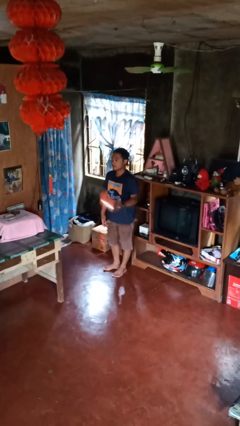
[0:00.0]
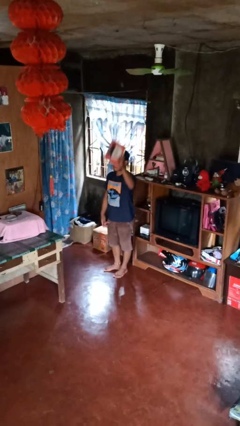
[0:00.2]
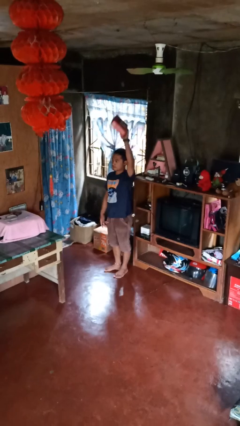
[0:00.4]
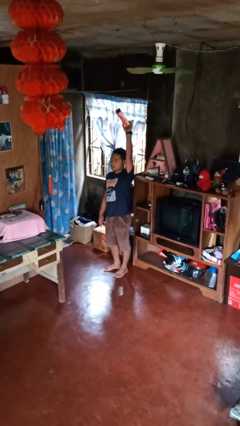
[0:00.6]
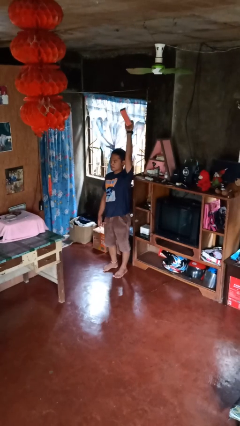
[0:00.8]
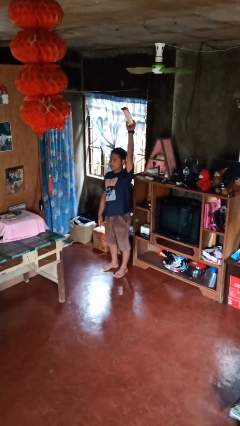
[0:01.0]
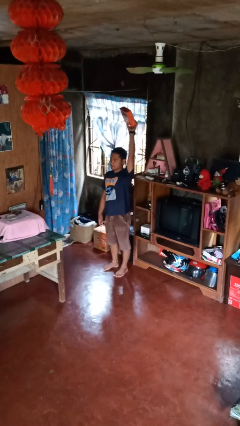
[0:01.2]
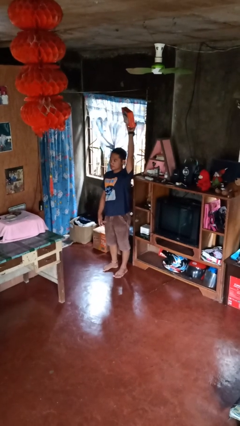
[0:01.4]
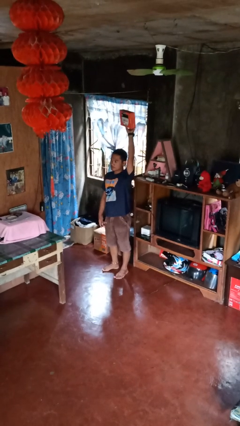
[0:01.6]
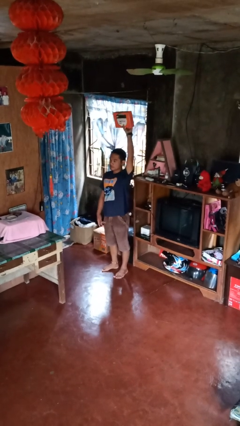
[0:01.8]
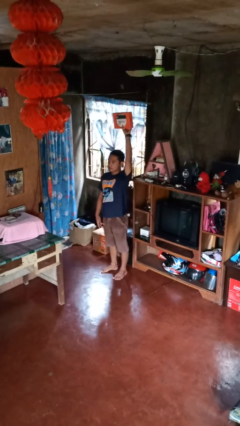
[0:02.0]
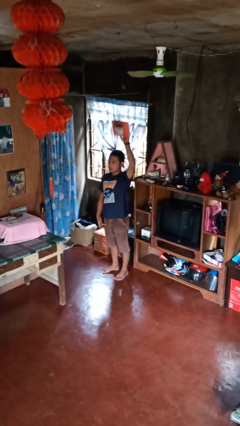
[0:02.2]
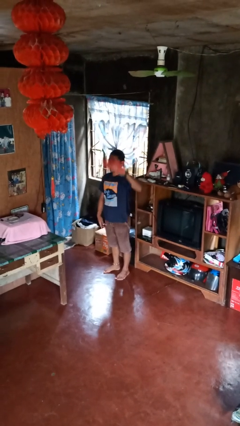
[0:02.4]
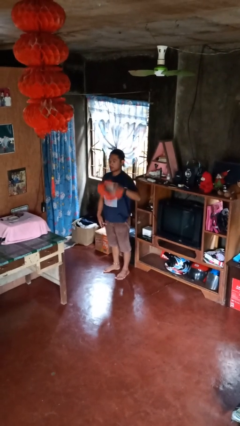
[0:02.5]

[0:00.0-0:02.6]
person holds object above head

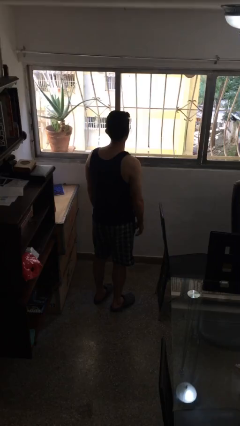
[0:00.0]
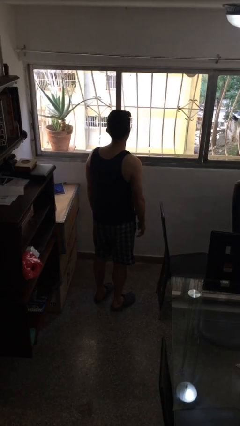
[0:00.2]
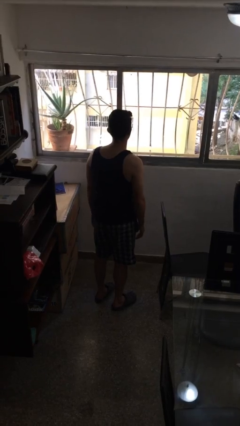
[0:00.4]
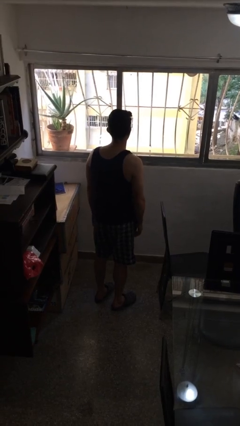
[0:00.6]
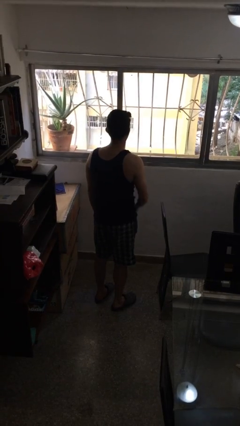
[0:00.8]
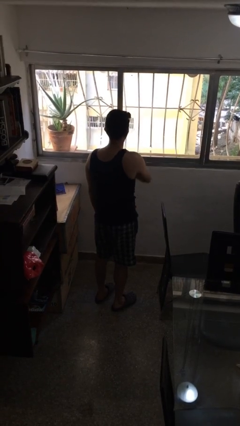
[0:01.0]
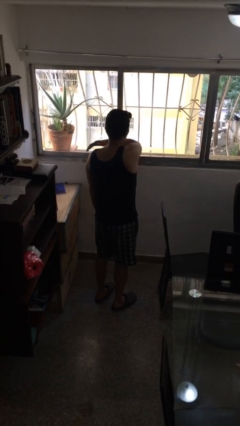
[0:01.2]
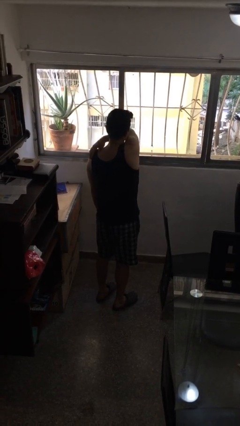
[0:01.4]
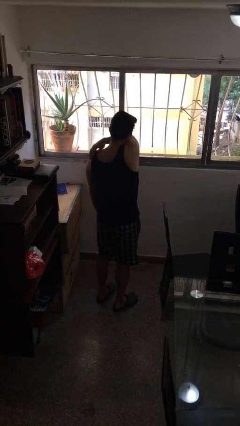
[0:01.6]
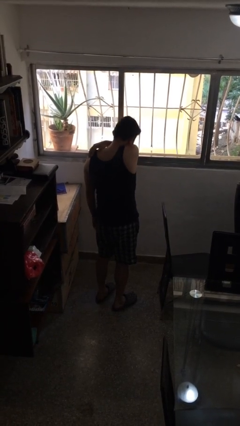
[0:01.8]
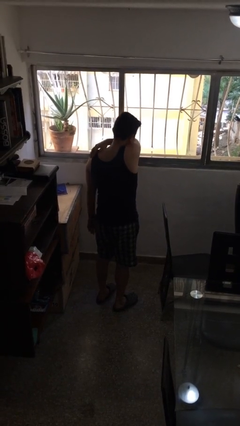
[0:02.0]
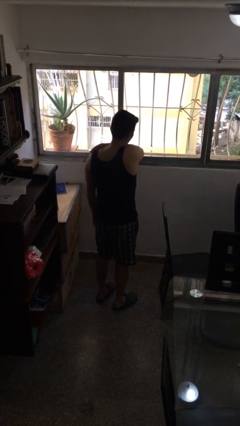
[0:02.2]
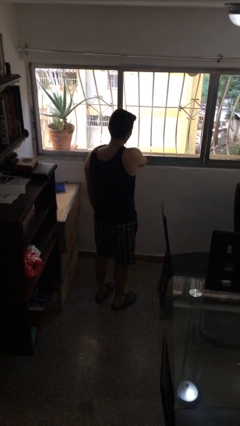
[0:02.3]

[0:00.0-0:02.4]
person sneezes into arm

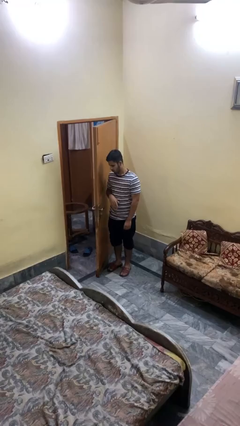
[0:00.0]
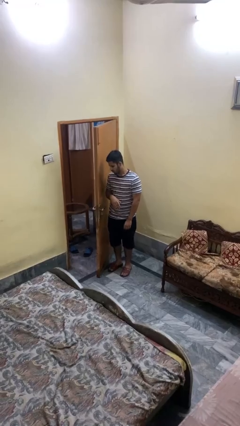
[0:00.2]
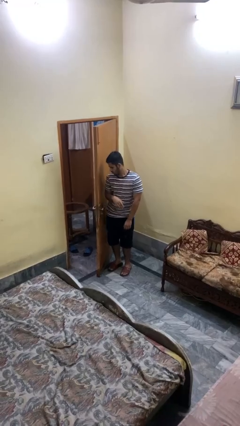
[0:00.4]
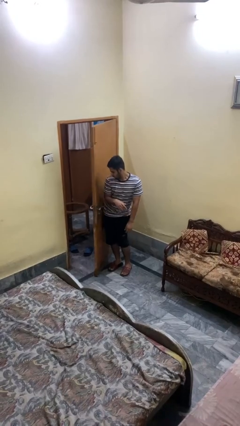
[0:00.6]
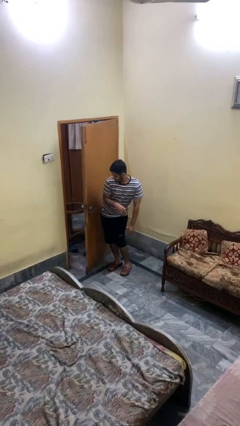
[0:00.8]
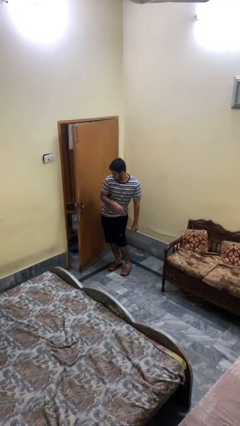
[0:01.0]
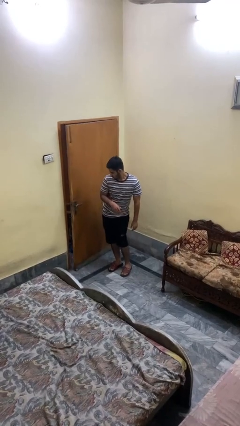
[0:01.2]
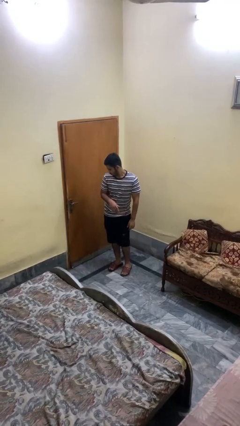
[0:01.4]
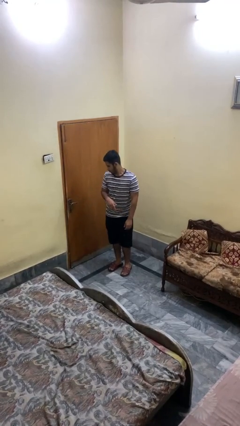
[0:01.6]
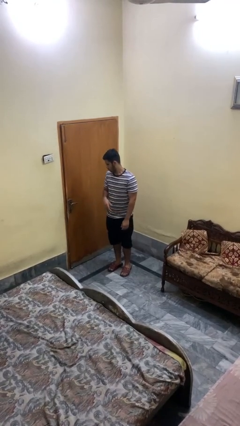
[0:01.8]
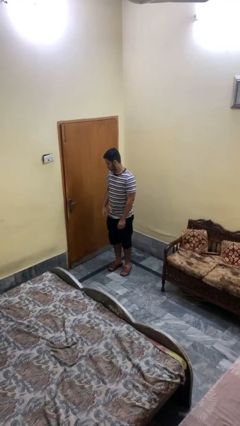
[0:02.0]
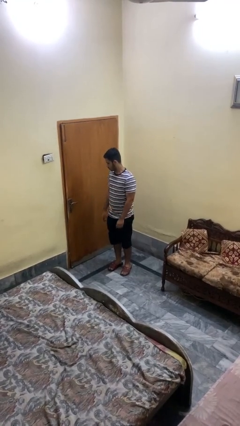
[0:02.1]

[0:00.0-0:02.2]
person closes door with hip

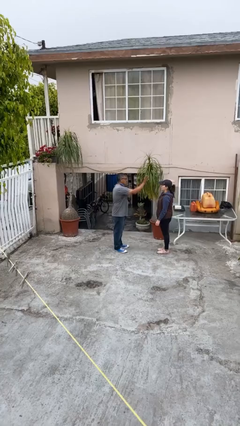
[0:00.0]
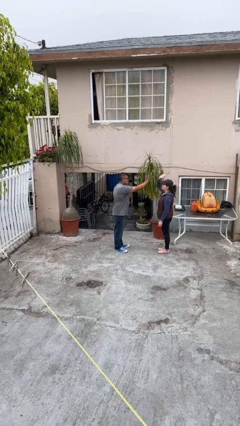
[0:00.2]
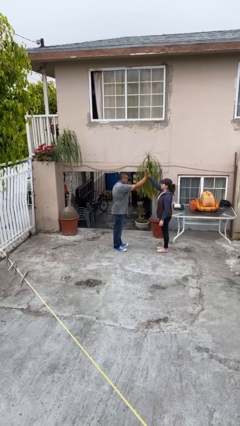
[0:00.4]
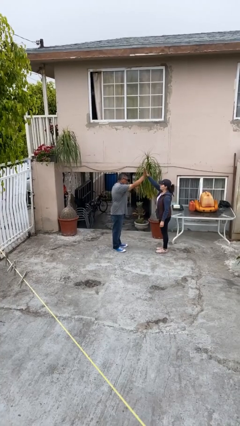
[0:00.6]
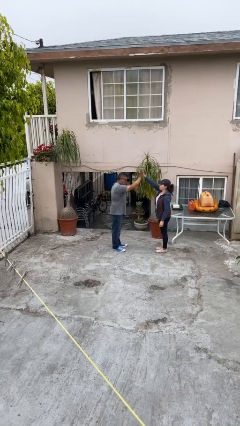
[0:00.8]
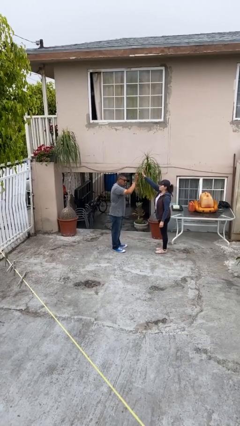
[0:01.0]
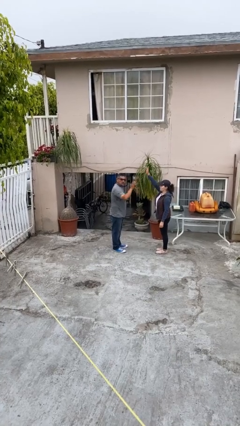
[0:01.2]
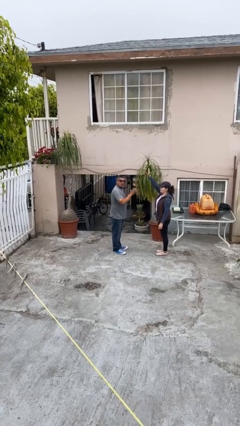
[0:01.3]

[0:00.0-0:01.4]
person highfives hand

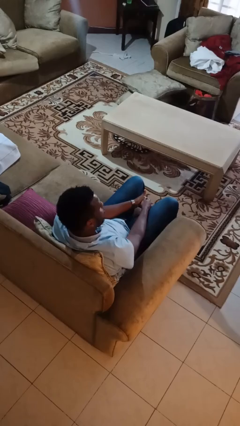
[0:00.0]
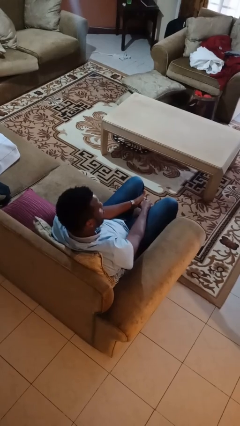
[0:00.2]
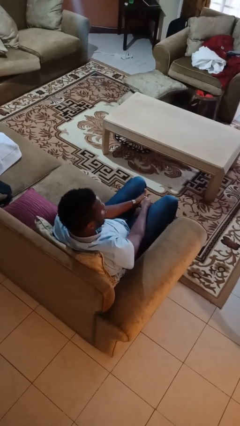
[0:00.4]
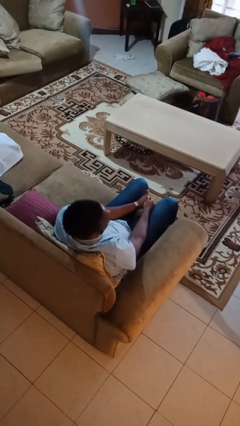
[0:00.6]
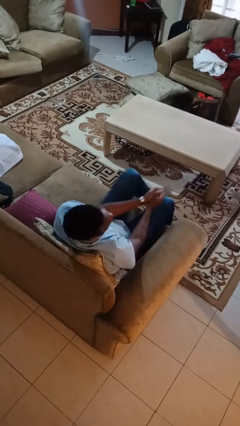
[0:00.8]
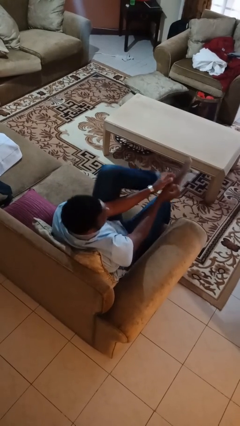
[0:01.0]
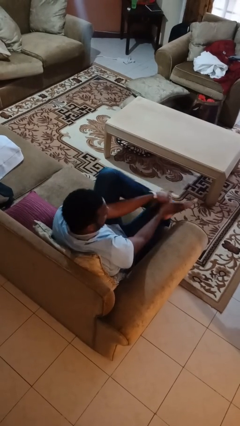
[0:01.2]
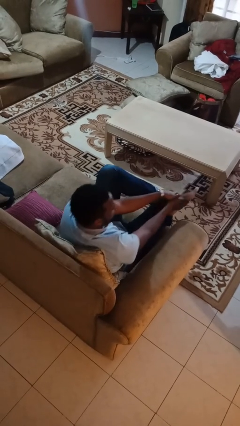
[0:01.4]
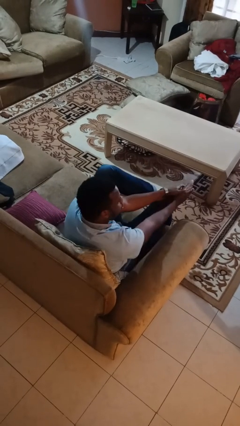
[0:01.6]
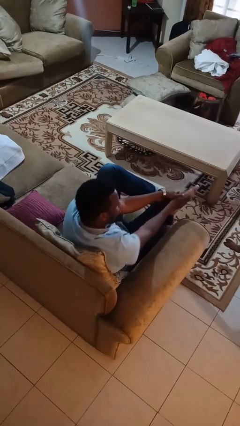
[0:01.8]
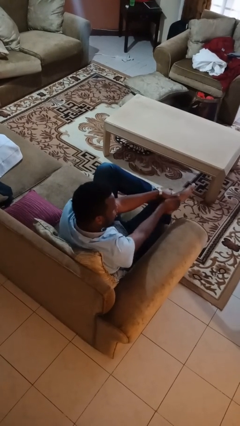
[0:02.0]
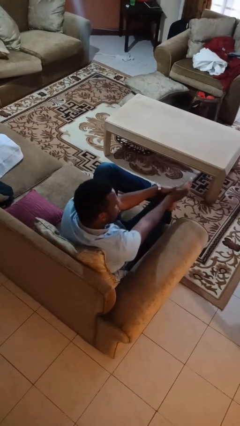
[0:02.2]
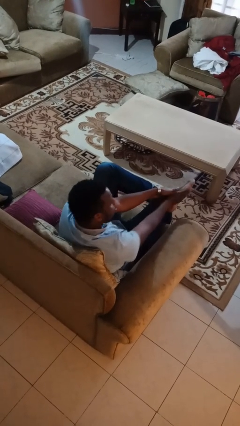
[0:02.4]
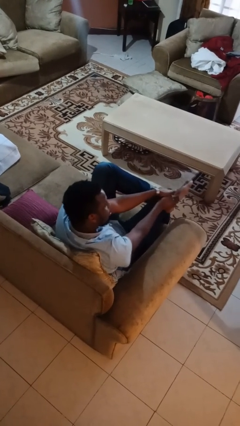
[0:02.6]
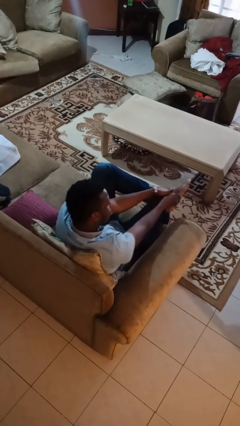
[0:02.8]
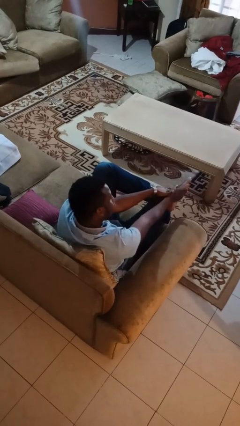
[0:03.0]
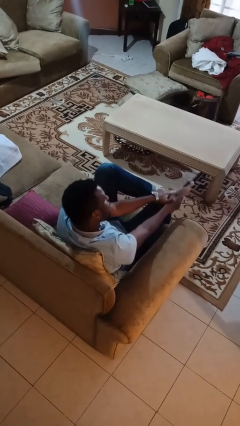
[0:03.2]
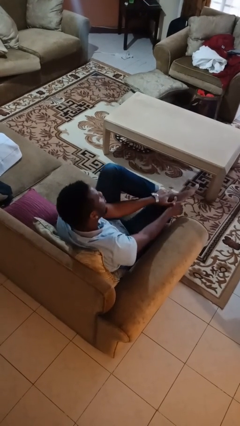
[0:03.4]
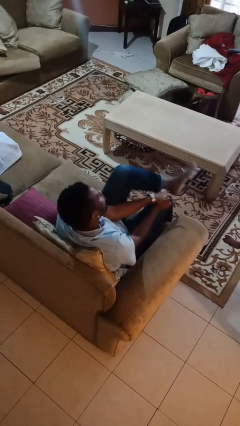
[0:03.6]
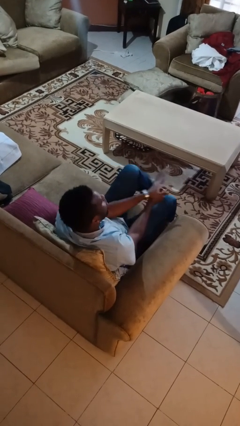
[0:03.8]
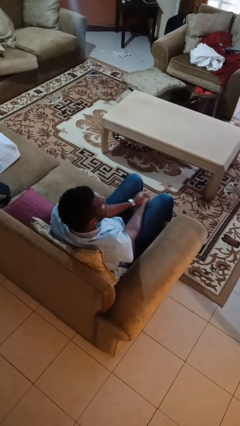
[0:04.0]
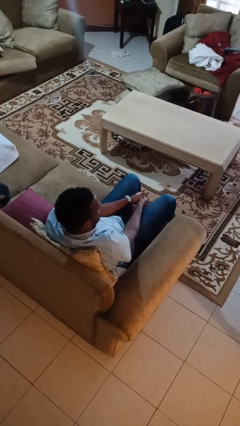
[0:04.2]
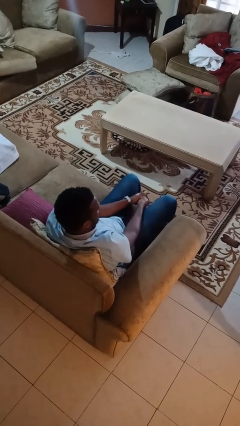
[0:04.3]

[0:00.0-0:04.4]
person rubs foot

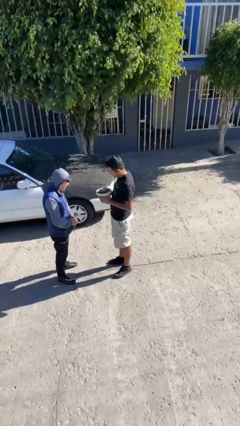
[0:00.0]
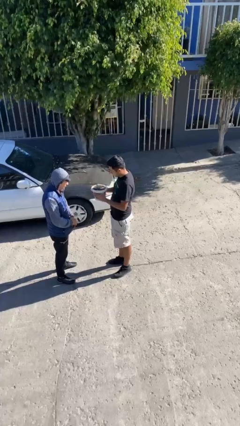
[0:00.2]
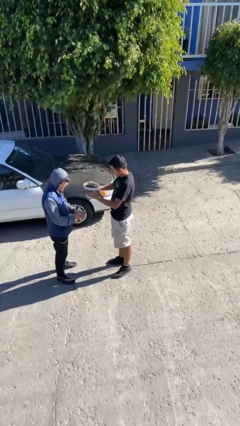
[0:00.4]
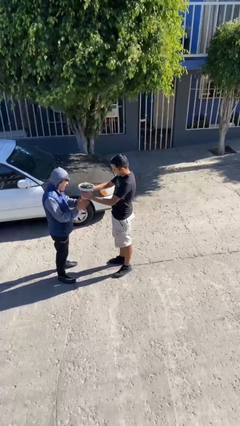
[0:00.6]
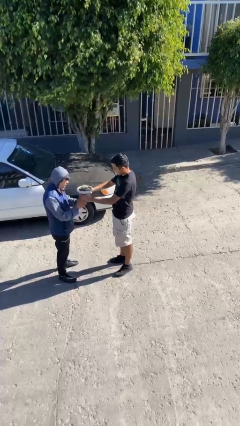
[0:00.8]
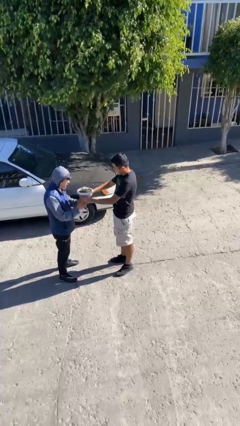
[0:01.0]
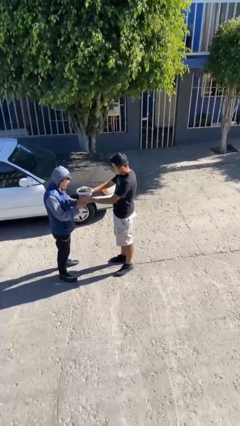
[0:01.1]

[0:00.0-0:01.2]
person transfers object to person

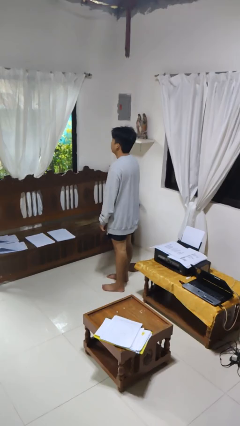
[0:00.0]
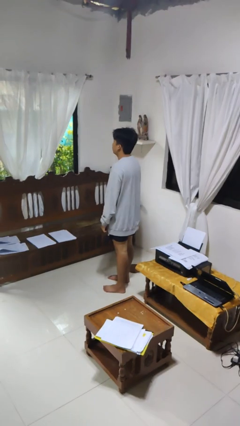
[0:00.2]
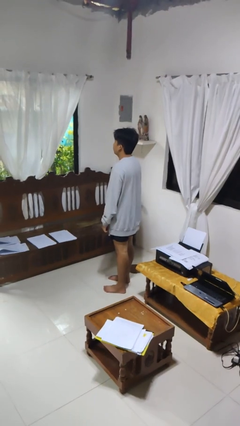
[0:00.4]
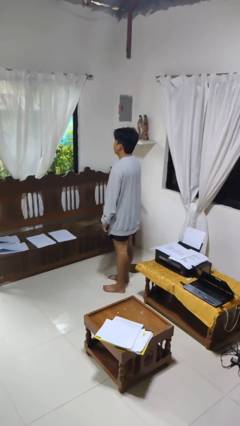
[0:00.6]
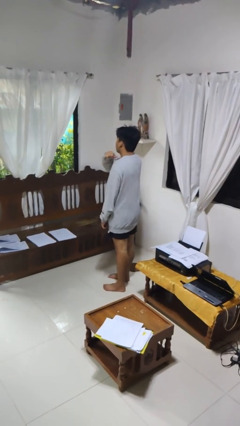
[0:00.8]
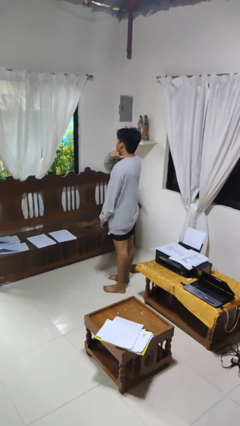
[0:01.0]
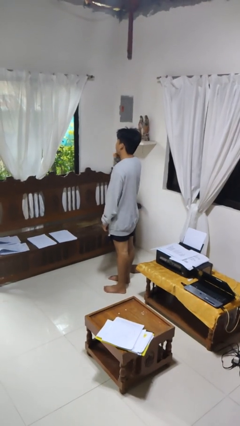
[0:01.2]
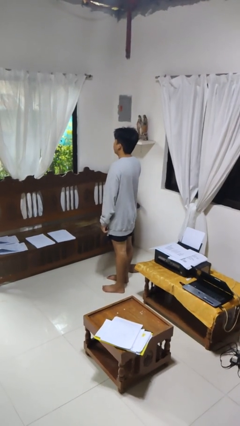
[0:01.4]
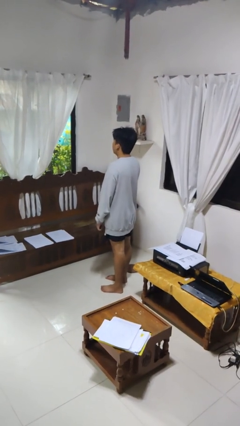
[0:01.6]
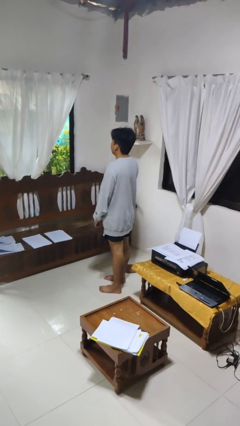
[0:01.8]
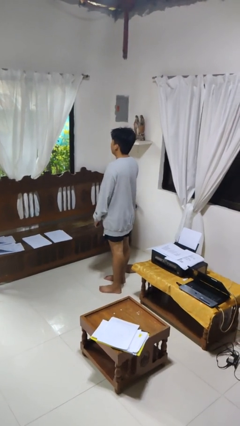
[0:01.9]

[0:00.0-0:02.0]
person gestures cut

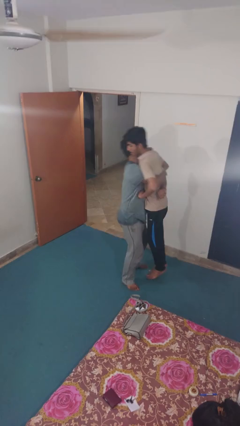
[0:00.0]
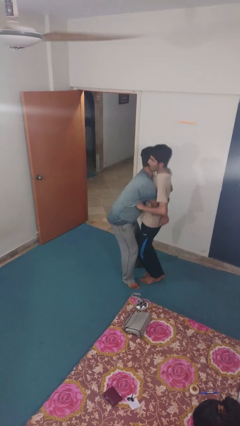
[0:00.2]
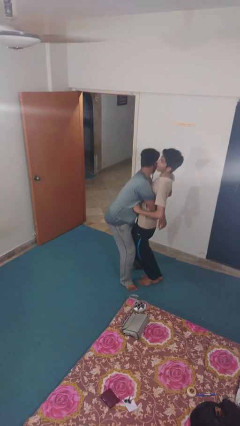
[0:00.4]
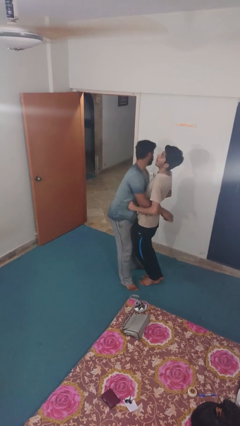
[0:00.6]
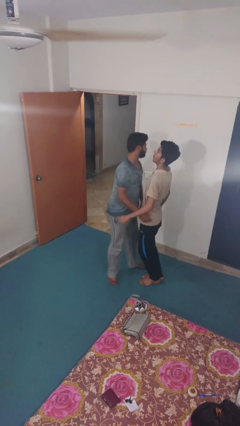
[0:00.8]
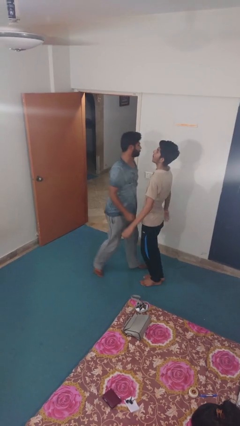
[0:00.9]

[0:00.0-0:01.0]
person puts down person
